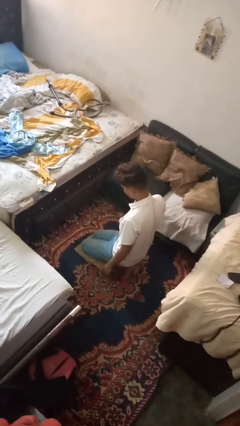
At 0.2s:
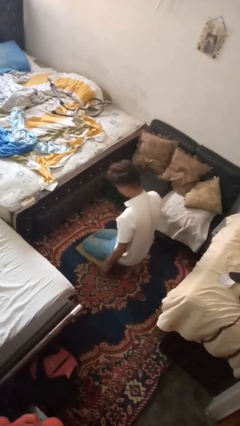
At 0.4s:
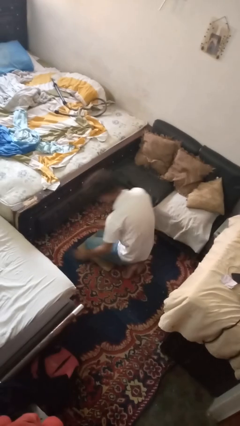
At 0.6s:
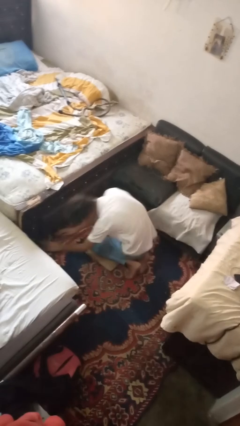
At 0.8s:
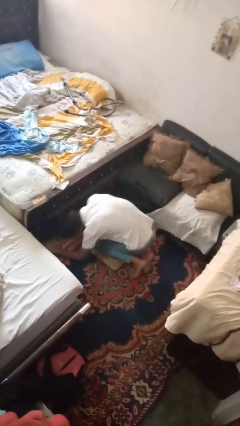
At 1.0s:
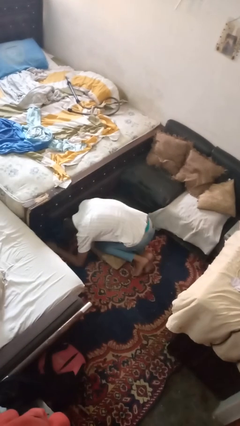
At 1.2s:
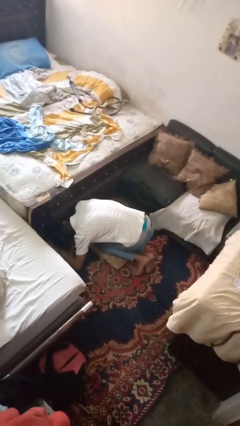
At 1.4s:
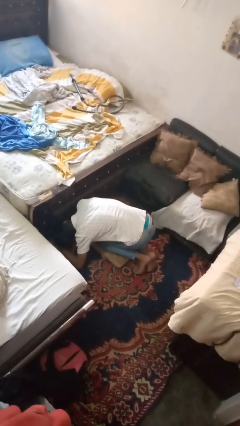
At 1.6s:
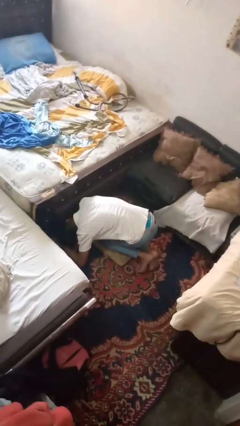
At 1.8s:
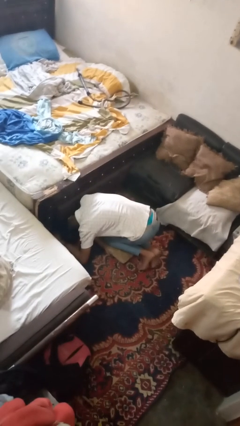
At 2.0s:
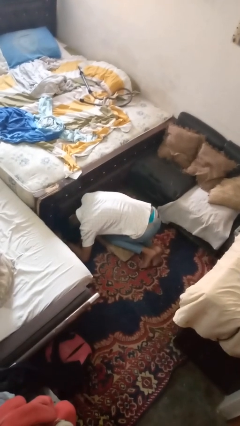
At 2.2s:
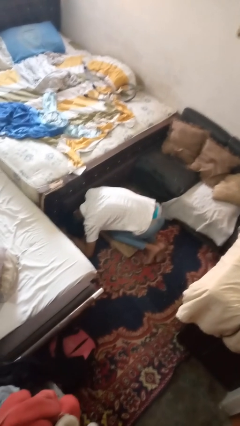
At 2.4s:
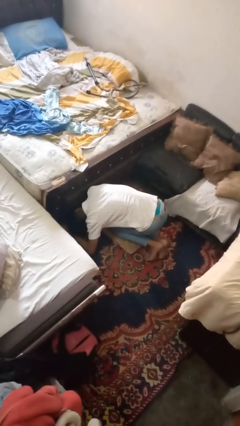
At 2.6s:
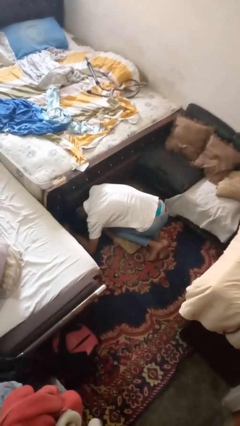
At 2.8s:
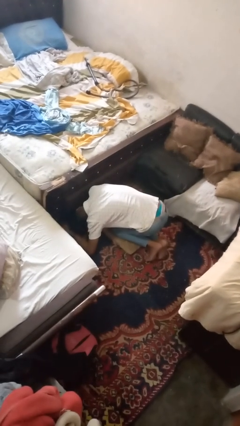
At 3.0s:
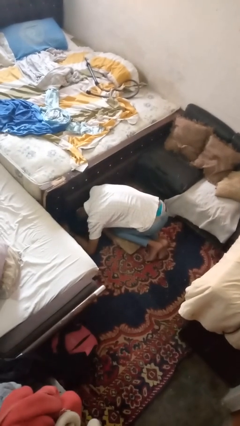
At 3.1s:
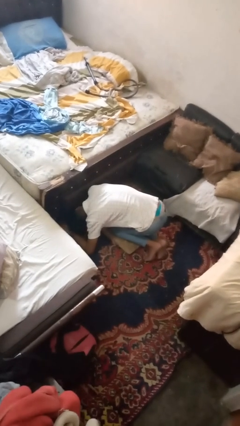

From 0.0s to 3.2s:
person searches under bed

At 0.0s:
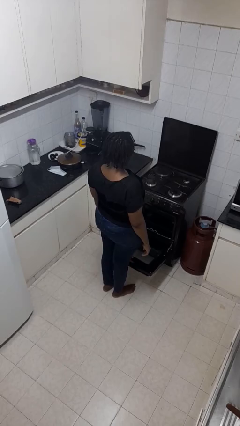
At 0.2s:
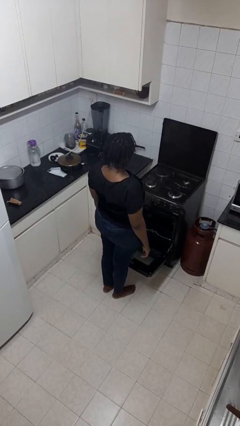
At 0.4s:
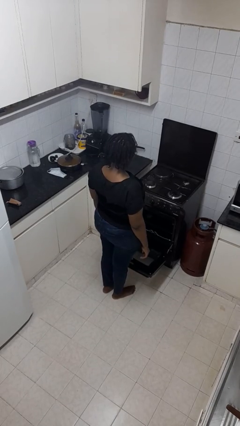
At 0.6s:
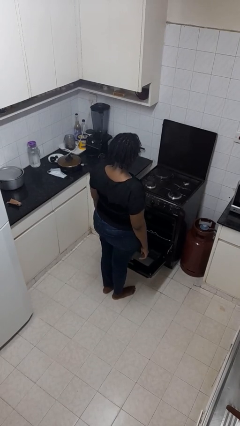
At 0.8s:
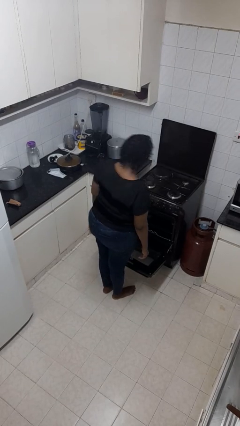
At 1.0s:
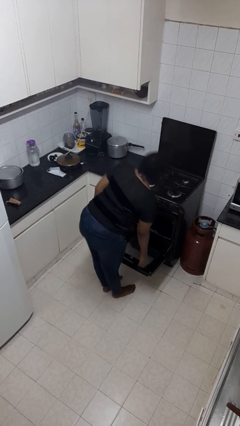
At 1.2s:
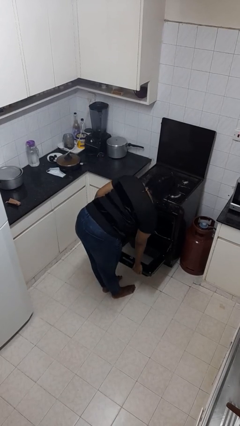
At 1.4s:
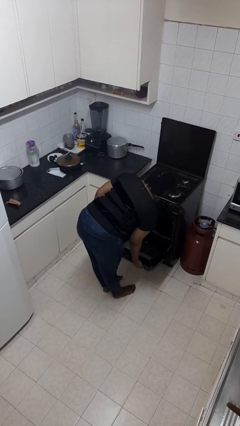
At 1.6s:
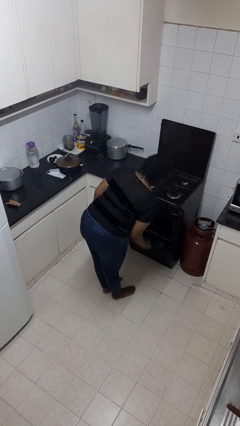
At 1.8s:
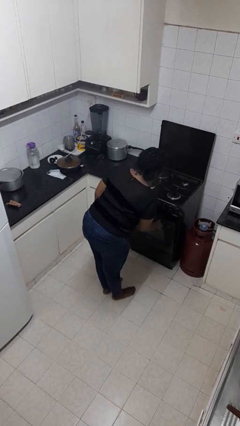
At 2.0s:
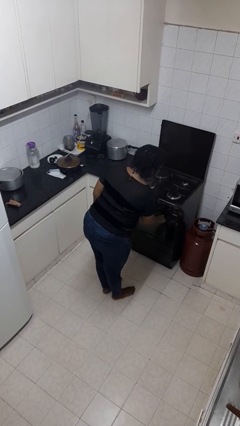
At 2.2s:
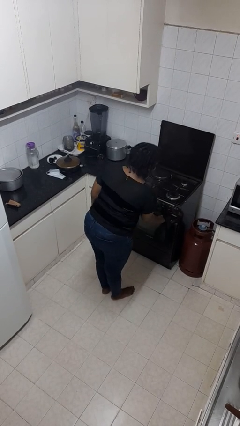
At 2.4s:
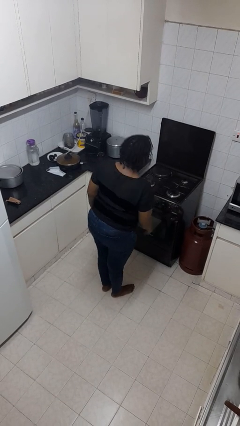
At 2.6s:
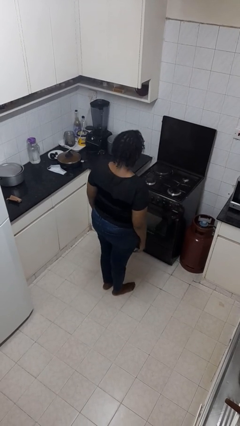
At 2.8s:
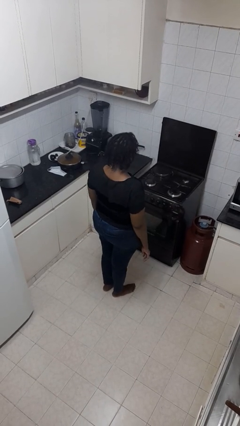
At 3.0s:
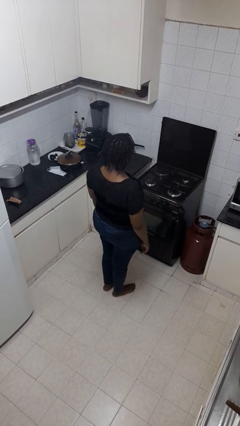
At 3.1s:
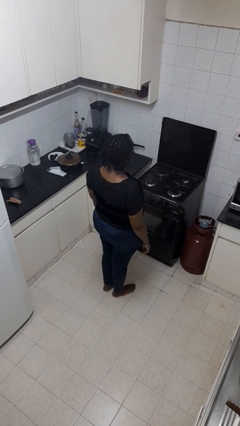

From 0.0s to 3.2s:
person closes oven door

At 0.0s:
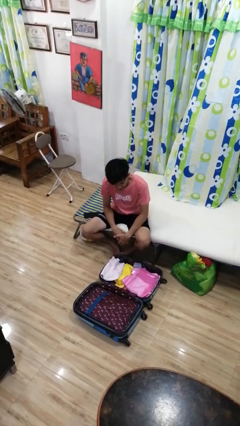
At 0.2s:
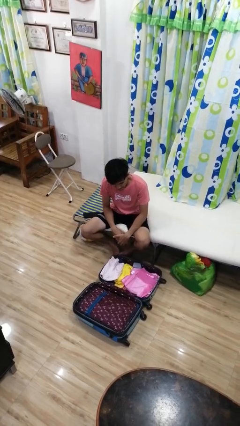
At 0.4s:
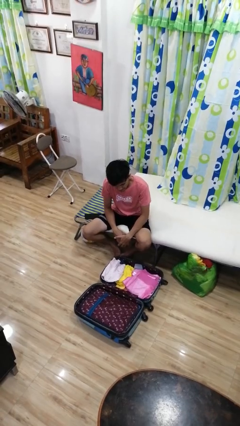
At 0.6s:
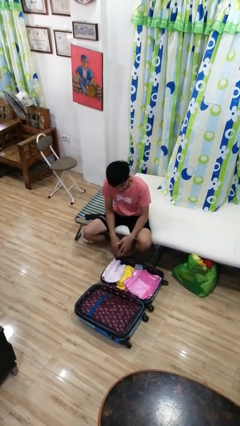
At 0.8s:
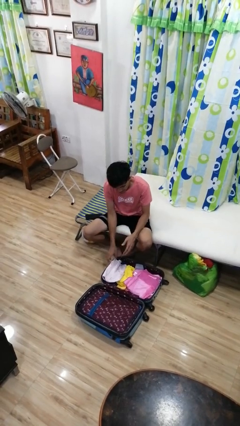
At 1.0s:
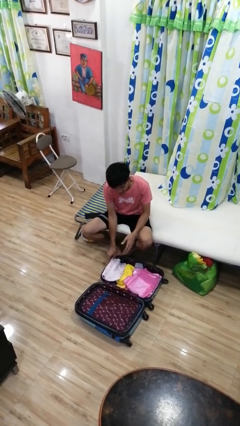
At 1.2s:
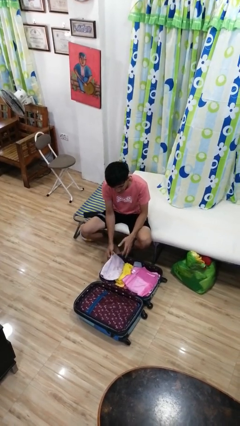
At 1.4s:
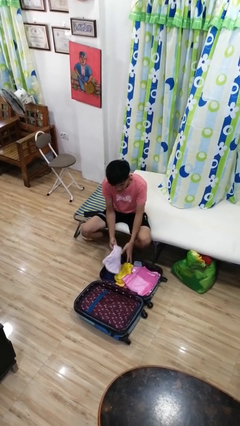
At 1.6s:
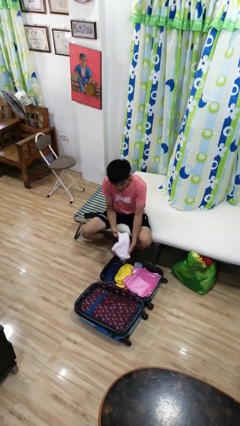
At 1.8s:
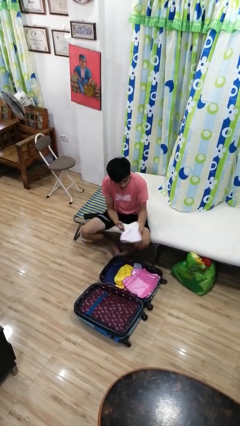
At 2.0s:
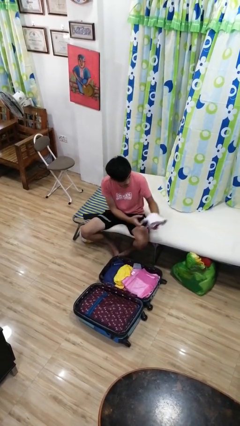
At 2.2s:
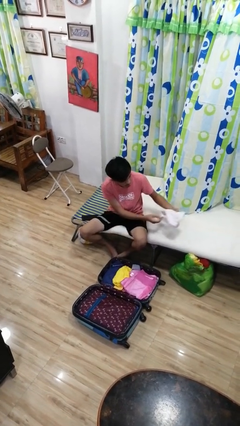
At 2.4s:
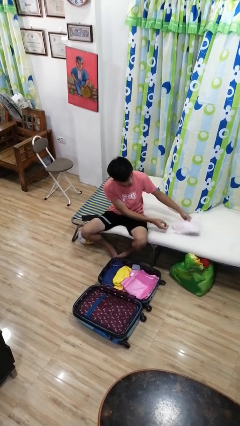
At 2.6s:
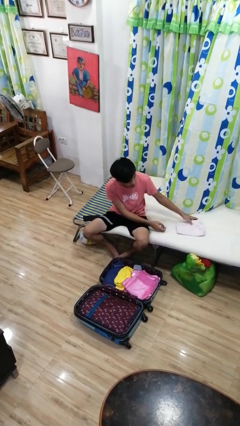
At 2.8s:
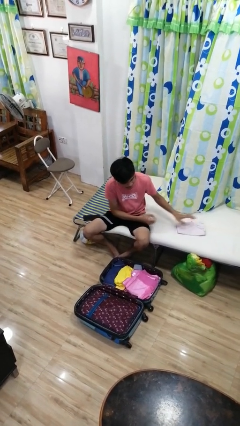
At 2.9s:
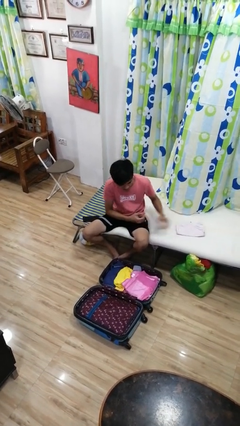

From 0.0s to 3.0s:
person unloads clothes from suitcase

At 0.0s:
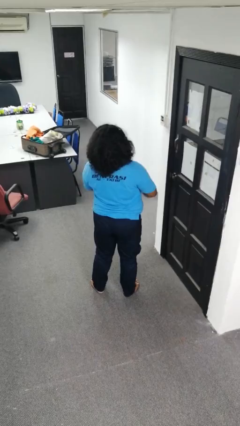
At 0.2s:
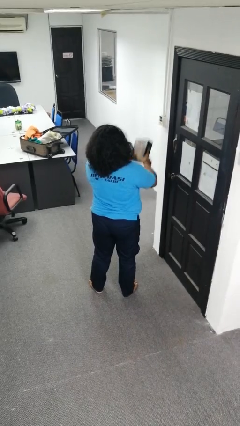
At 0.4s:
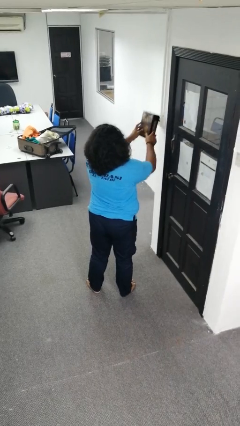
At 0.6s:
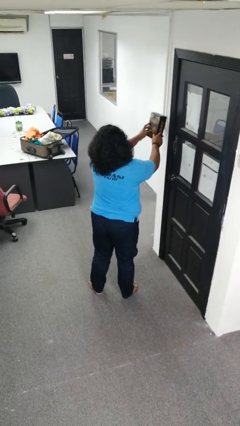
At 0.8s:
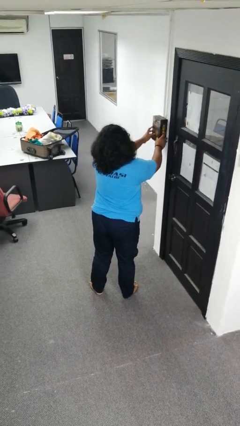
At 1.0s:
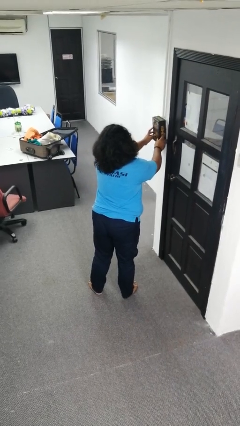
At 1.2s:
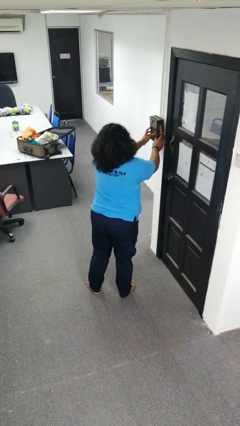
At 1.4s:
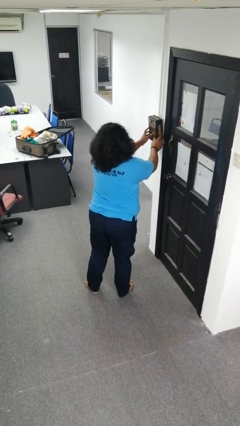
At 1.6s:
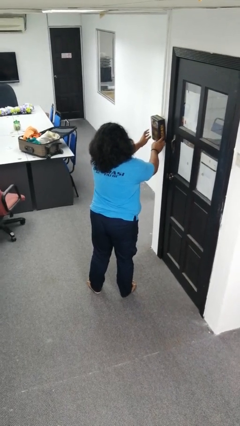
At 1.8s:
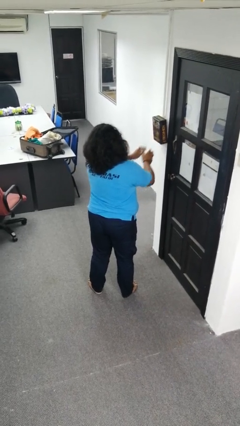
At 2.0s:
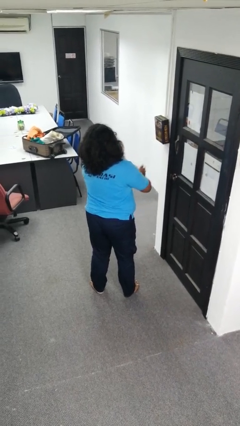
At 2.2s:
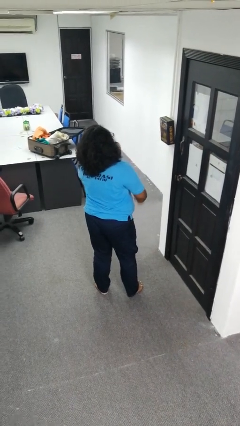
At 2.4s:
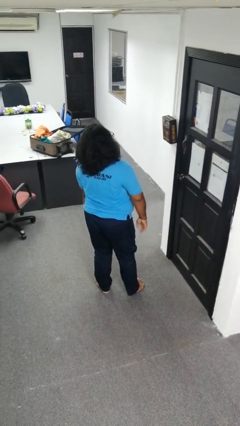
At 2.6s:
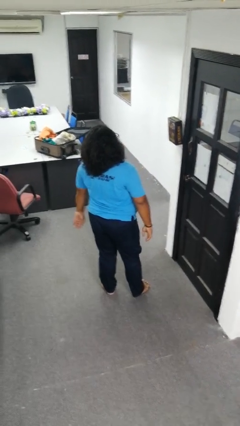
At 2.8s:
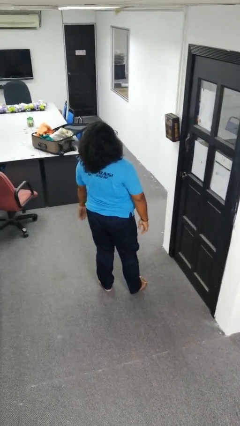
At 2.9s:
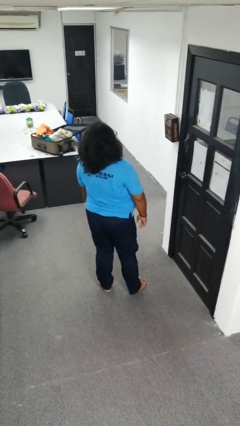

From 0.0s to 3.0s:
person puts up picture frame

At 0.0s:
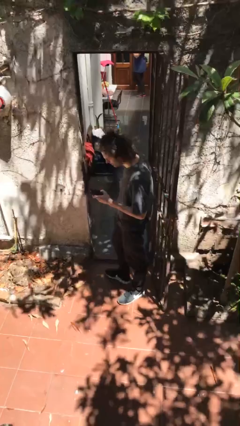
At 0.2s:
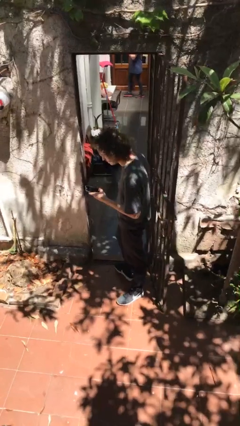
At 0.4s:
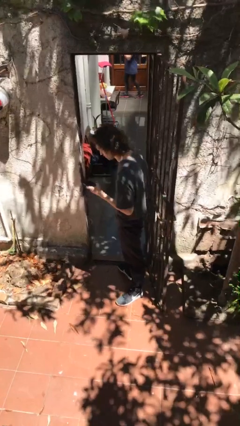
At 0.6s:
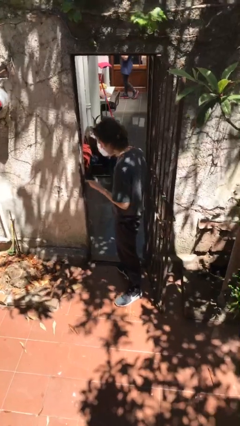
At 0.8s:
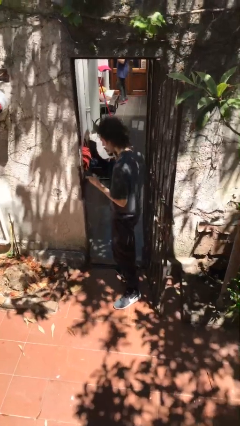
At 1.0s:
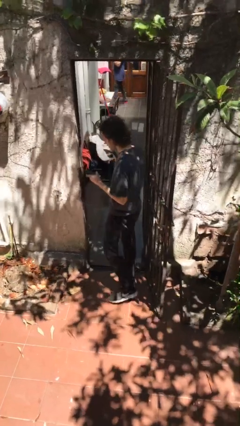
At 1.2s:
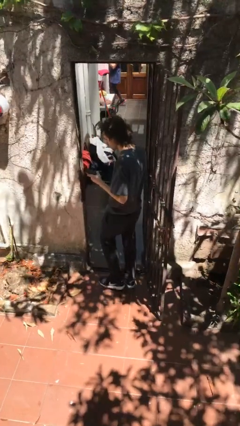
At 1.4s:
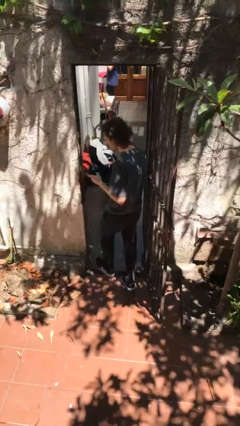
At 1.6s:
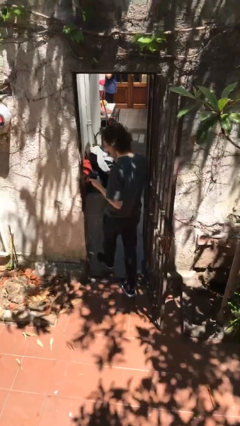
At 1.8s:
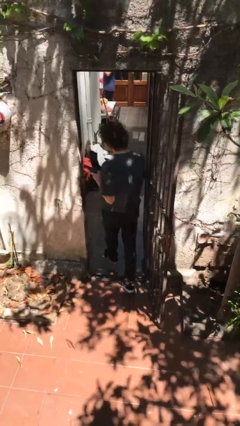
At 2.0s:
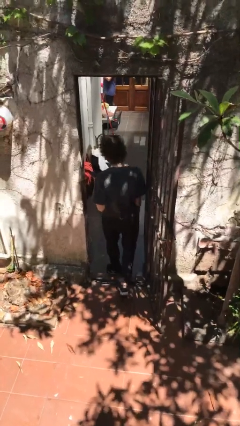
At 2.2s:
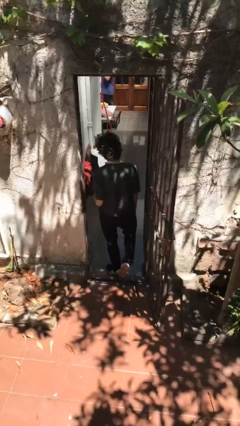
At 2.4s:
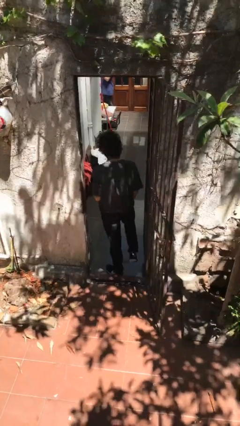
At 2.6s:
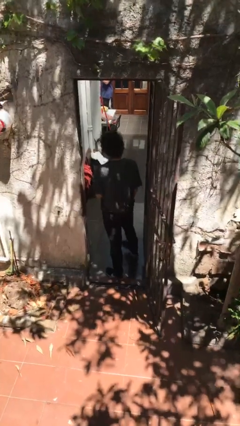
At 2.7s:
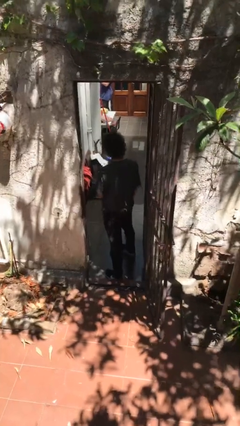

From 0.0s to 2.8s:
person exits scene through structure

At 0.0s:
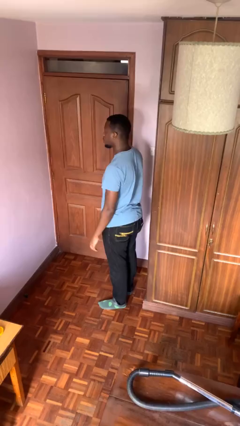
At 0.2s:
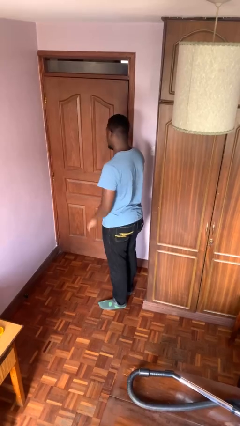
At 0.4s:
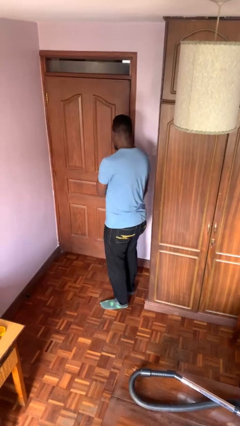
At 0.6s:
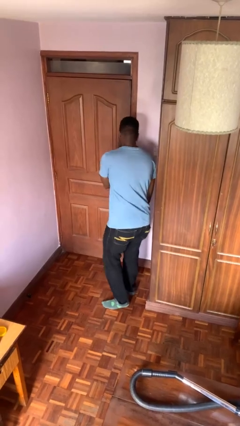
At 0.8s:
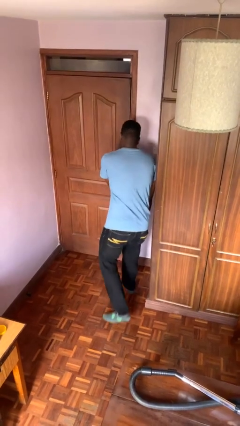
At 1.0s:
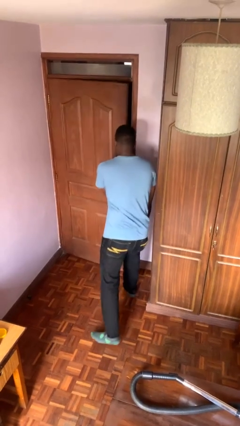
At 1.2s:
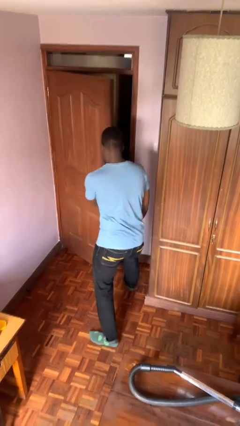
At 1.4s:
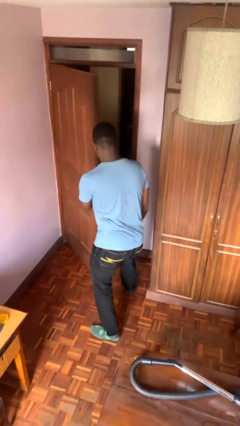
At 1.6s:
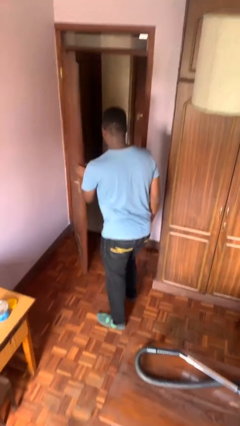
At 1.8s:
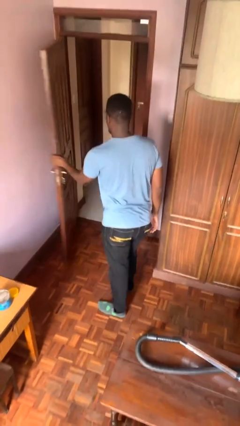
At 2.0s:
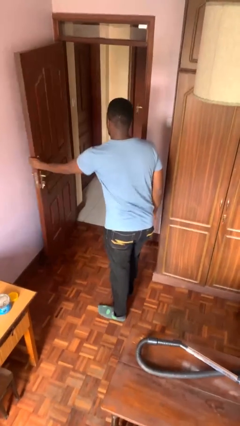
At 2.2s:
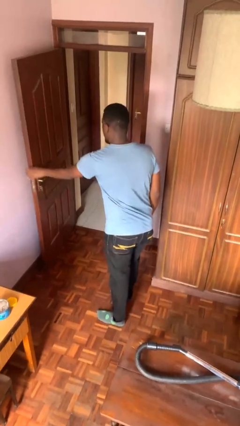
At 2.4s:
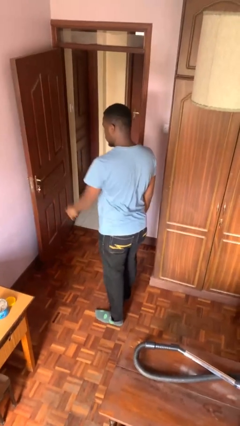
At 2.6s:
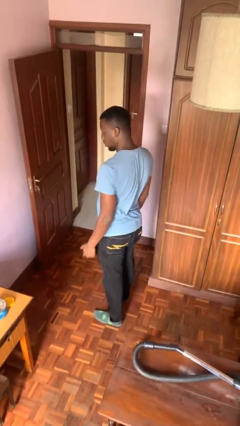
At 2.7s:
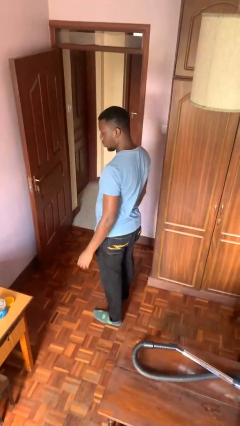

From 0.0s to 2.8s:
person opens facility door
